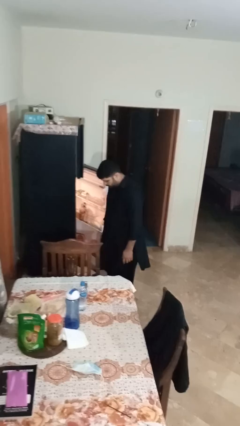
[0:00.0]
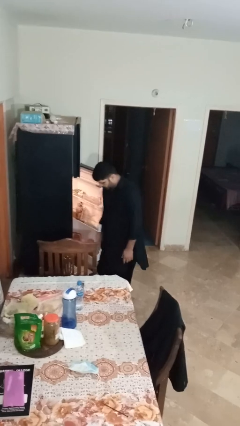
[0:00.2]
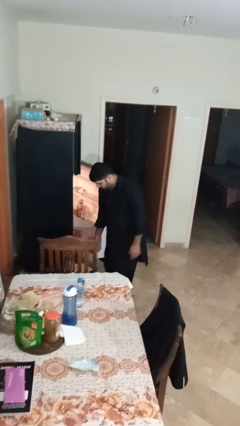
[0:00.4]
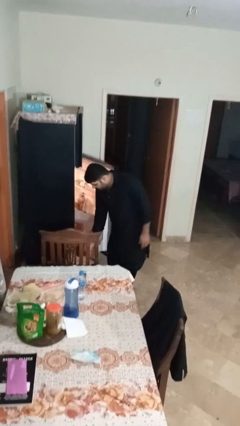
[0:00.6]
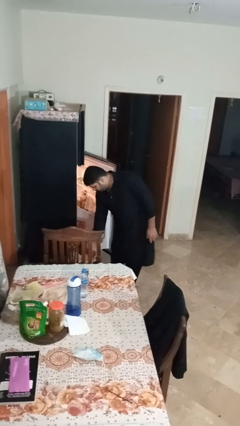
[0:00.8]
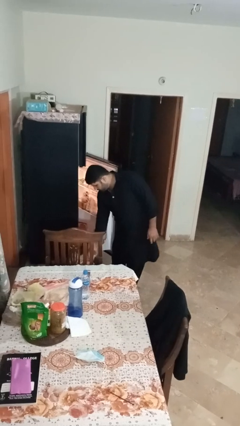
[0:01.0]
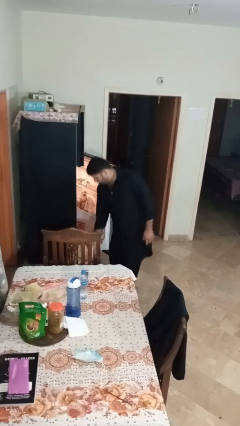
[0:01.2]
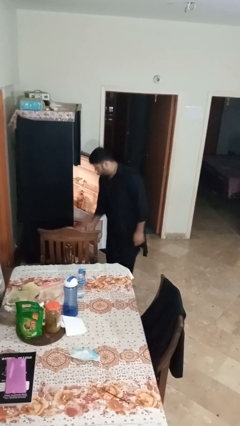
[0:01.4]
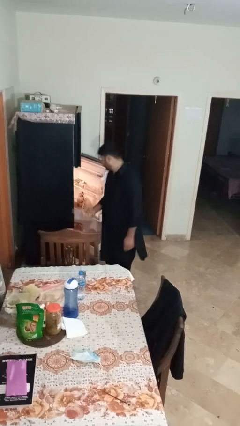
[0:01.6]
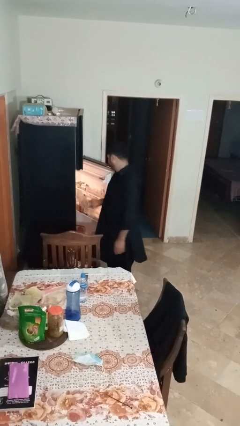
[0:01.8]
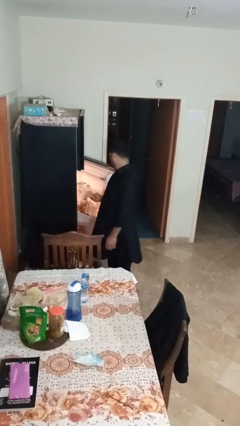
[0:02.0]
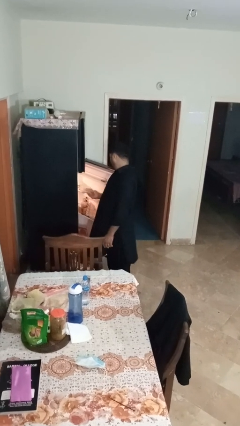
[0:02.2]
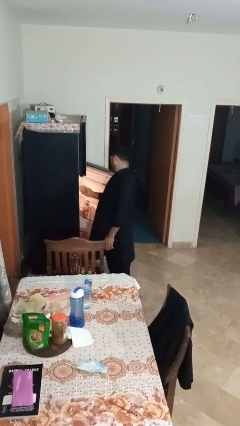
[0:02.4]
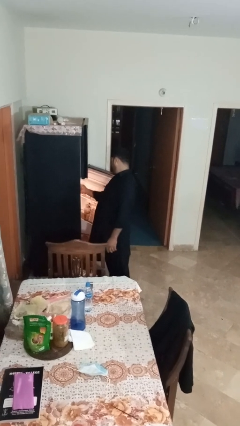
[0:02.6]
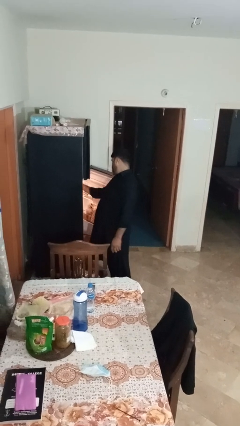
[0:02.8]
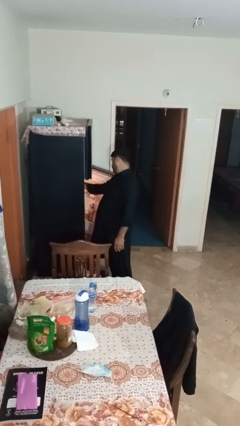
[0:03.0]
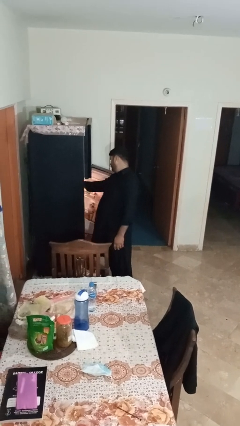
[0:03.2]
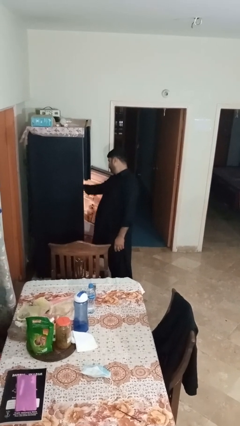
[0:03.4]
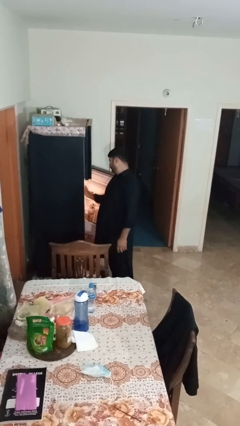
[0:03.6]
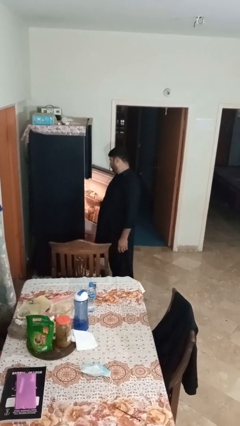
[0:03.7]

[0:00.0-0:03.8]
person loads groceries into refrigerator

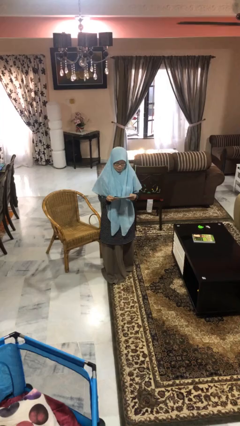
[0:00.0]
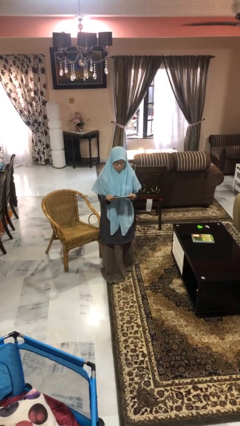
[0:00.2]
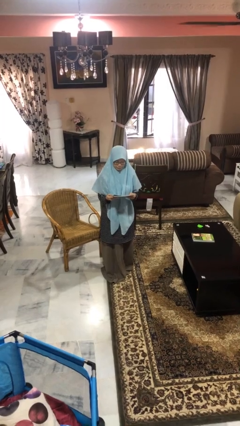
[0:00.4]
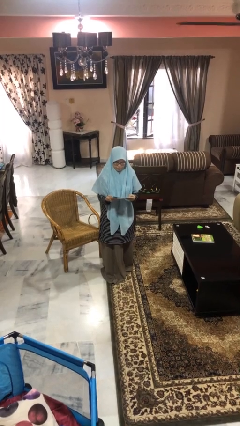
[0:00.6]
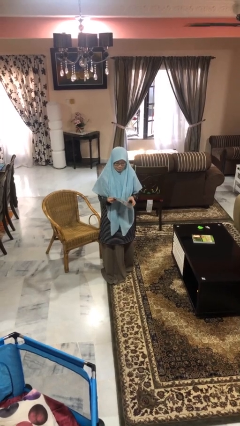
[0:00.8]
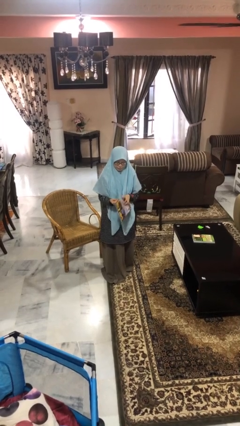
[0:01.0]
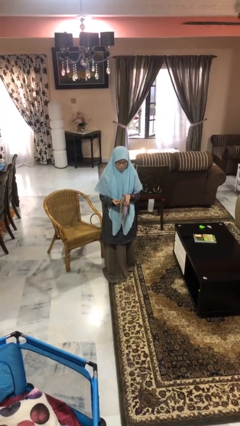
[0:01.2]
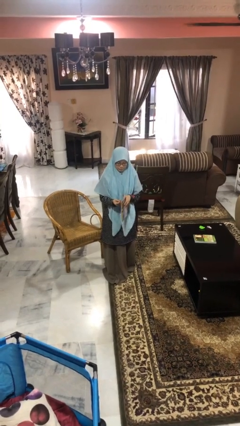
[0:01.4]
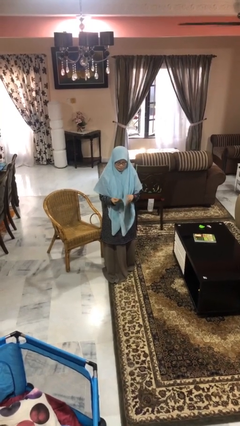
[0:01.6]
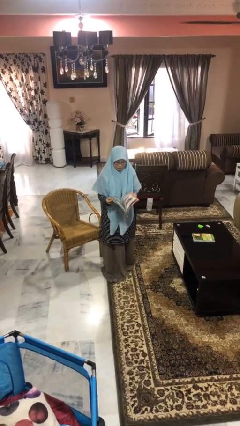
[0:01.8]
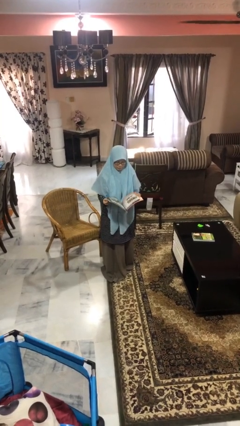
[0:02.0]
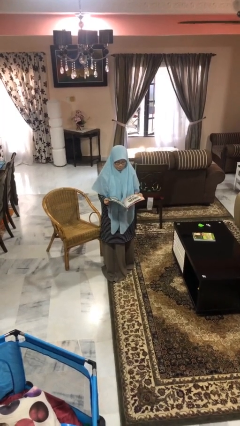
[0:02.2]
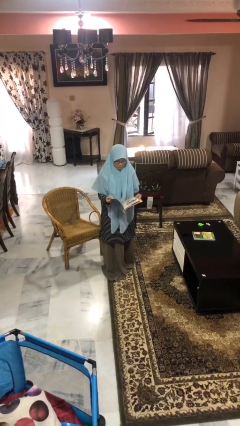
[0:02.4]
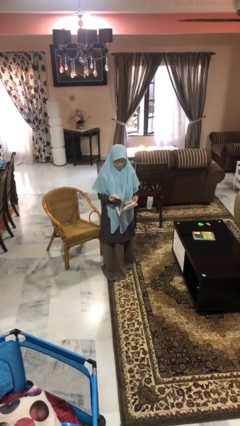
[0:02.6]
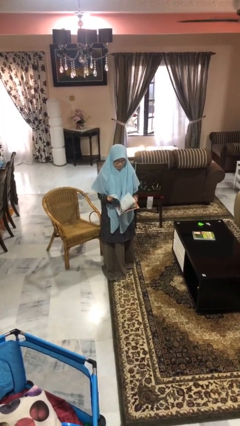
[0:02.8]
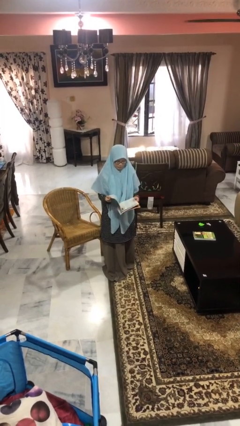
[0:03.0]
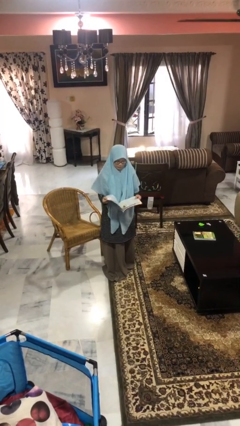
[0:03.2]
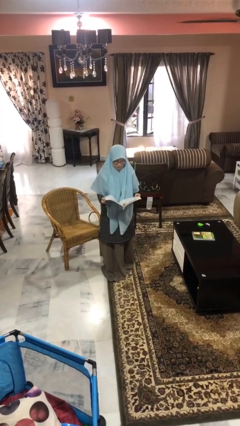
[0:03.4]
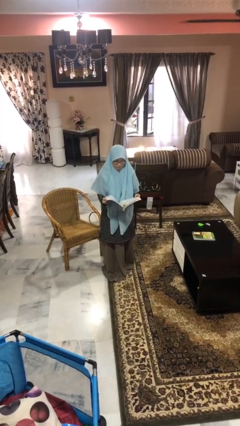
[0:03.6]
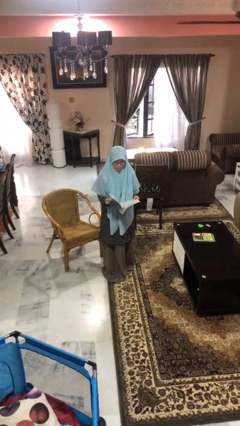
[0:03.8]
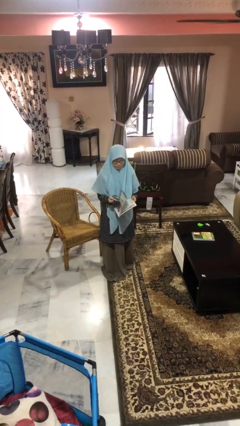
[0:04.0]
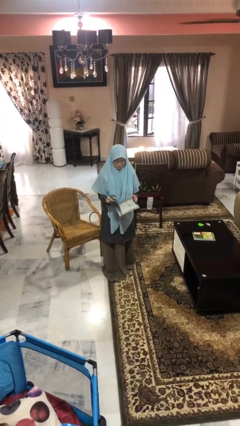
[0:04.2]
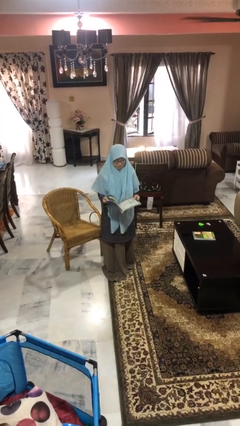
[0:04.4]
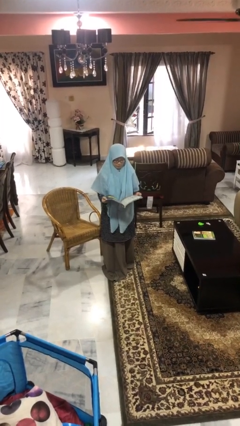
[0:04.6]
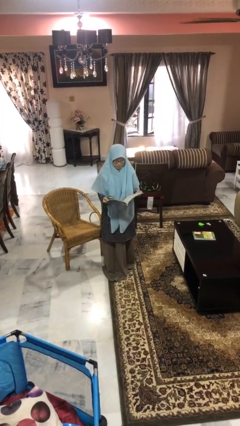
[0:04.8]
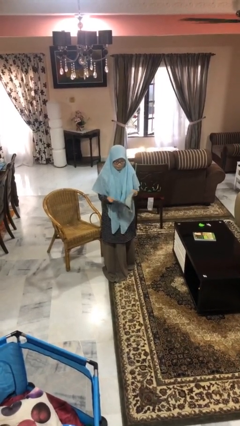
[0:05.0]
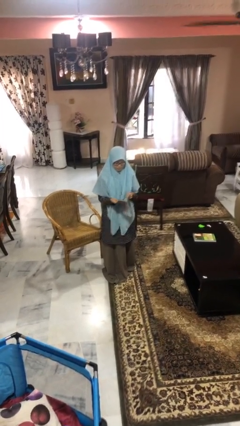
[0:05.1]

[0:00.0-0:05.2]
person reads magazine

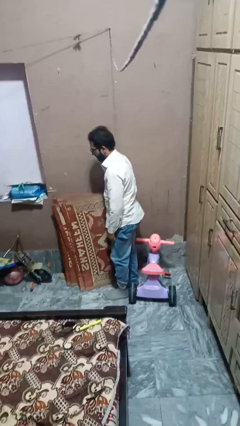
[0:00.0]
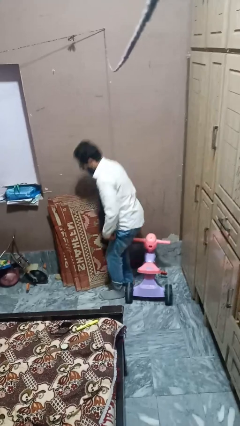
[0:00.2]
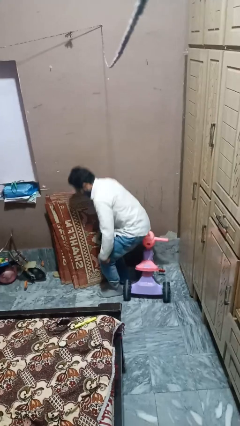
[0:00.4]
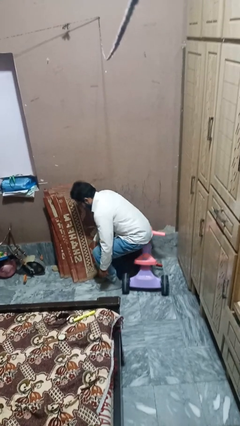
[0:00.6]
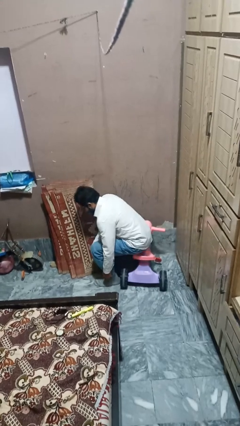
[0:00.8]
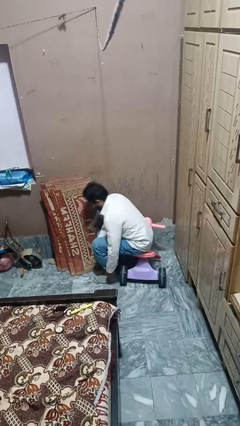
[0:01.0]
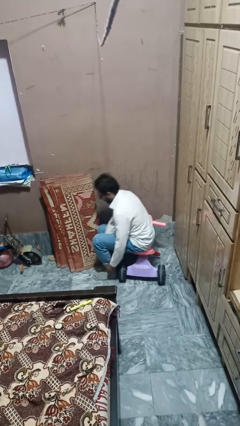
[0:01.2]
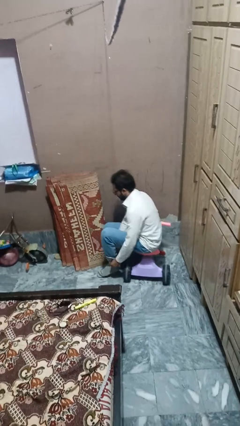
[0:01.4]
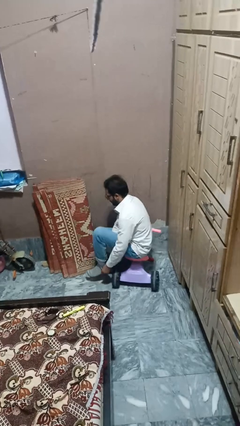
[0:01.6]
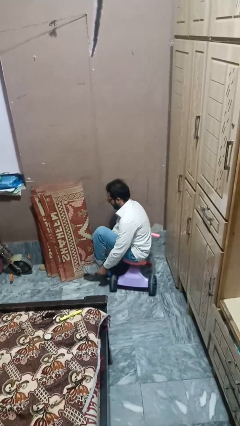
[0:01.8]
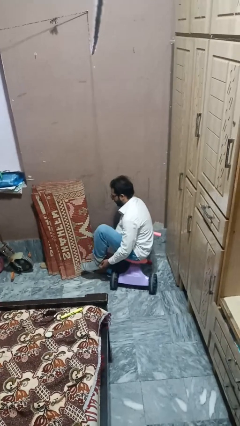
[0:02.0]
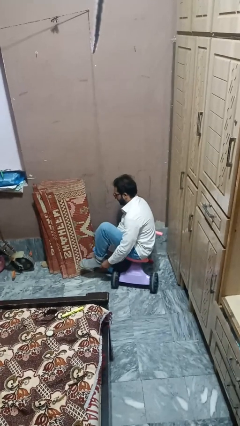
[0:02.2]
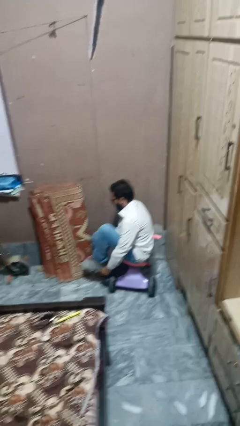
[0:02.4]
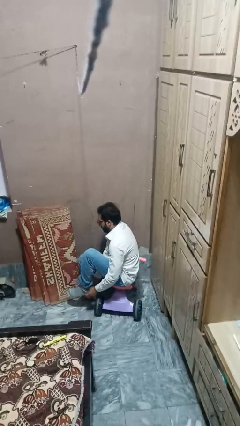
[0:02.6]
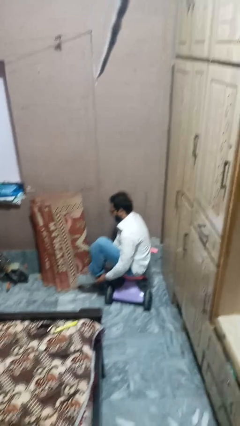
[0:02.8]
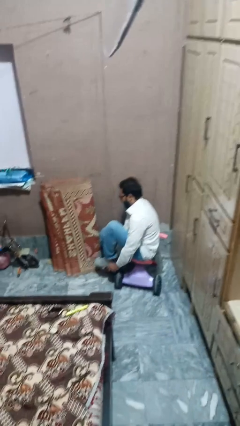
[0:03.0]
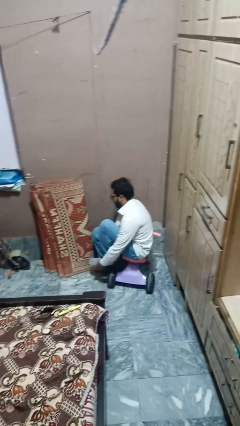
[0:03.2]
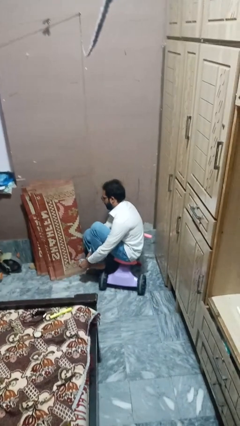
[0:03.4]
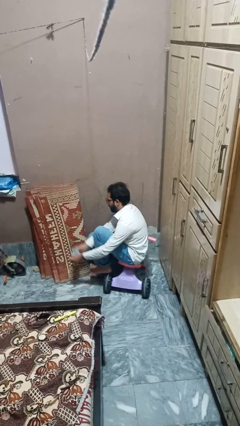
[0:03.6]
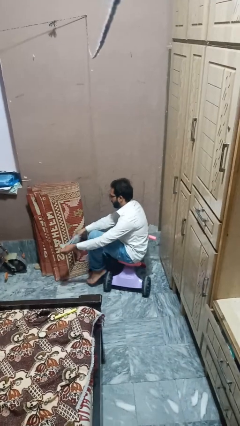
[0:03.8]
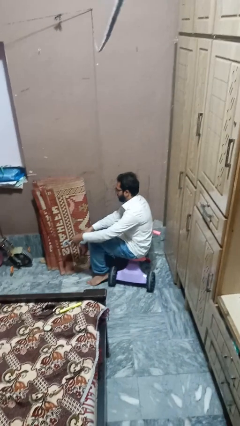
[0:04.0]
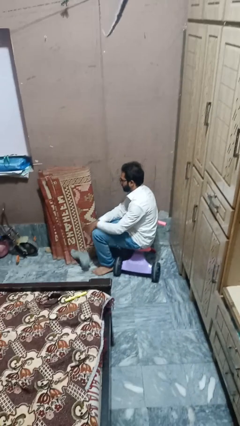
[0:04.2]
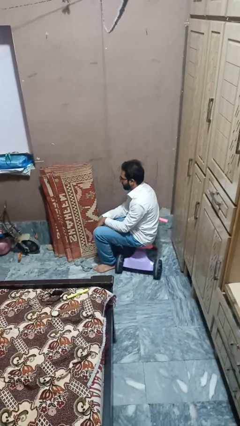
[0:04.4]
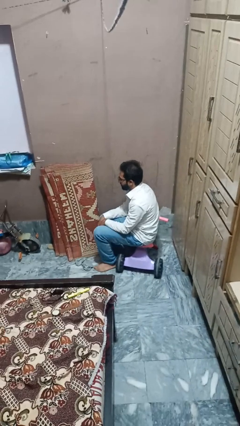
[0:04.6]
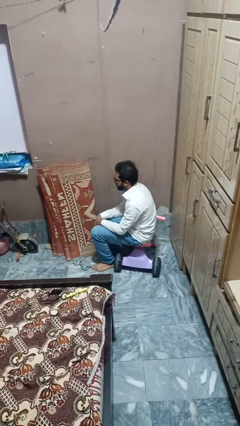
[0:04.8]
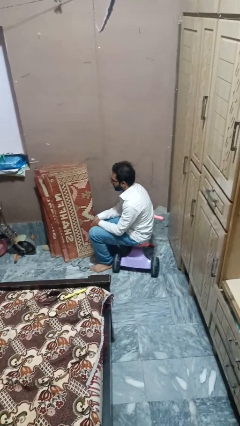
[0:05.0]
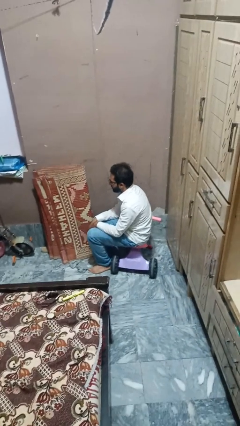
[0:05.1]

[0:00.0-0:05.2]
person takes off socks

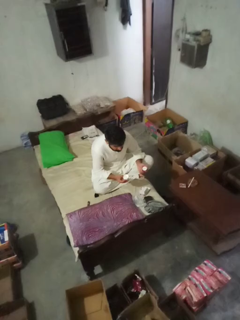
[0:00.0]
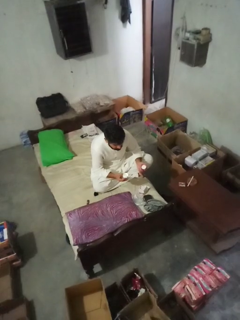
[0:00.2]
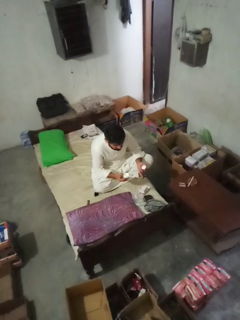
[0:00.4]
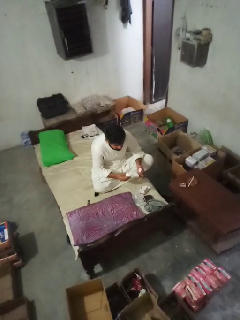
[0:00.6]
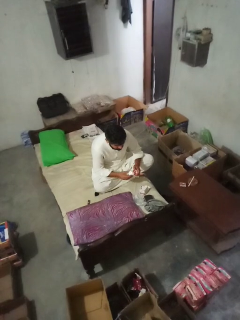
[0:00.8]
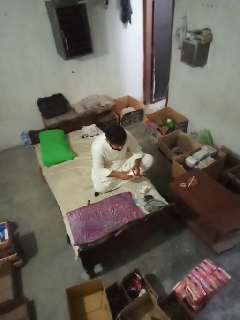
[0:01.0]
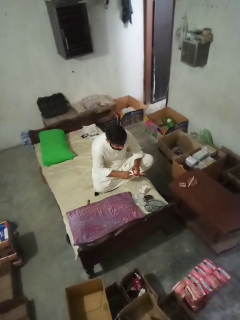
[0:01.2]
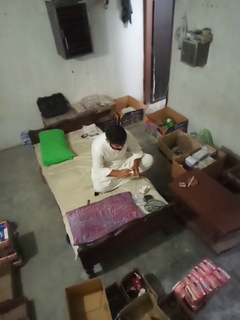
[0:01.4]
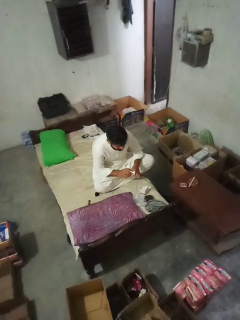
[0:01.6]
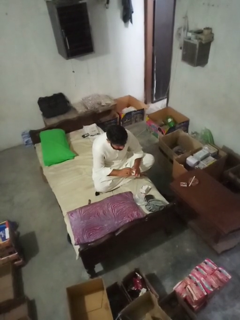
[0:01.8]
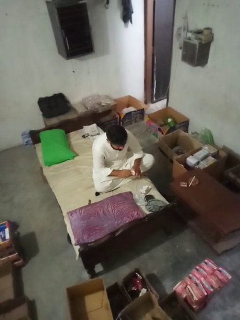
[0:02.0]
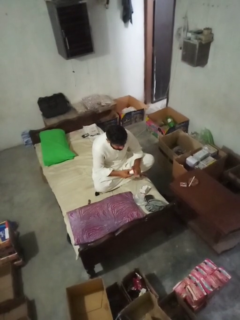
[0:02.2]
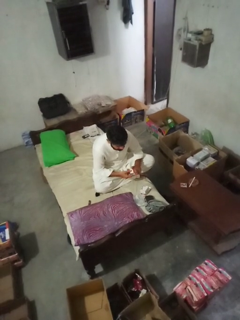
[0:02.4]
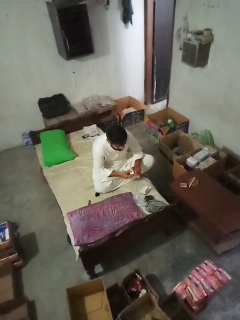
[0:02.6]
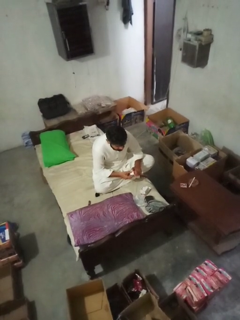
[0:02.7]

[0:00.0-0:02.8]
person closes jar

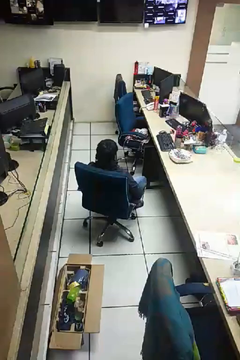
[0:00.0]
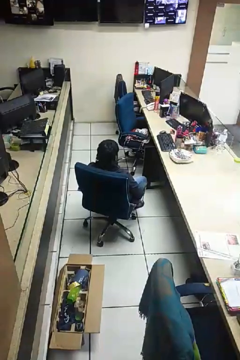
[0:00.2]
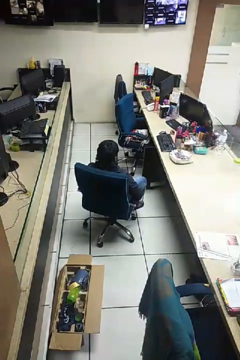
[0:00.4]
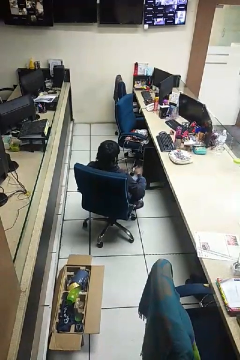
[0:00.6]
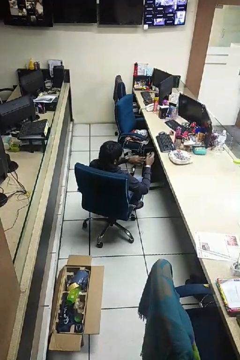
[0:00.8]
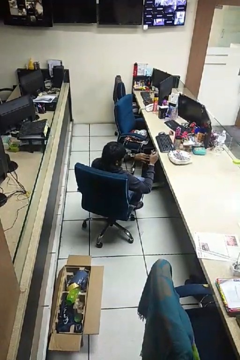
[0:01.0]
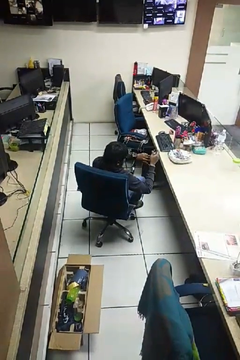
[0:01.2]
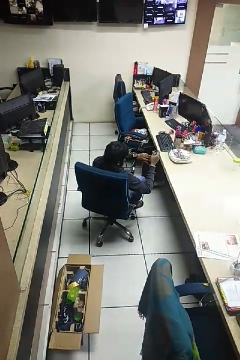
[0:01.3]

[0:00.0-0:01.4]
person clips fingernails
